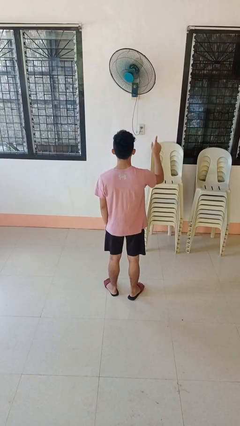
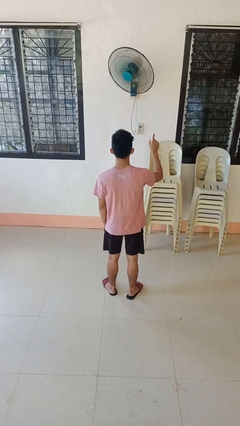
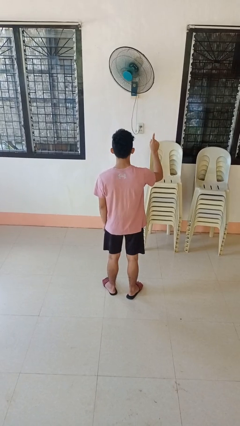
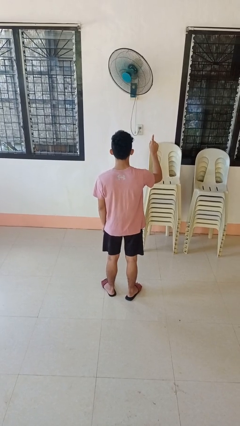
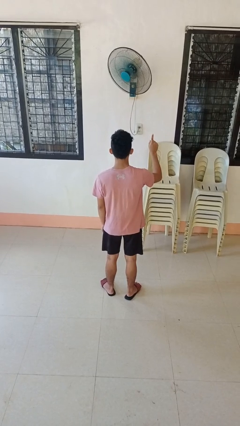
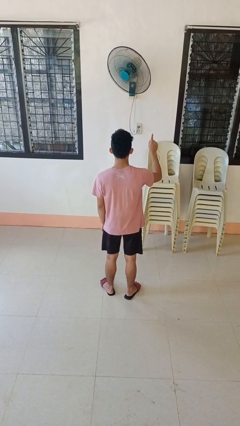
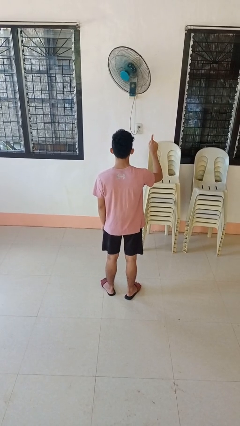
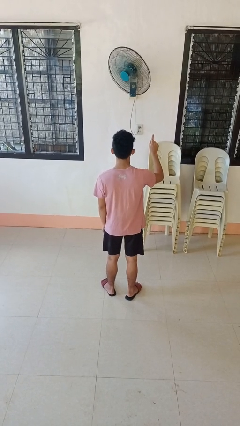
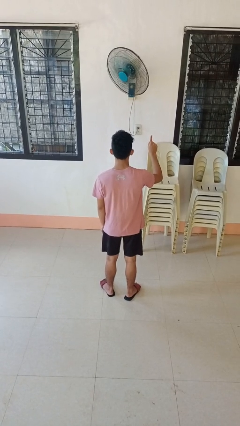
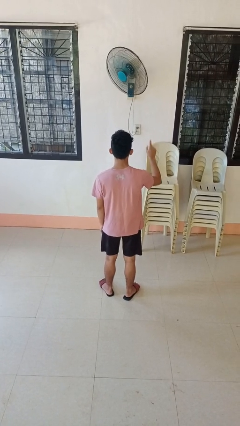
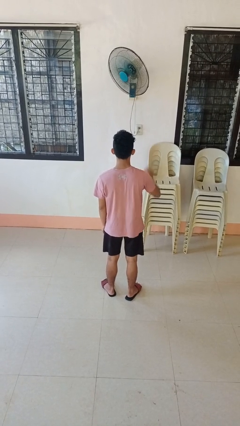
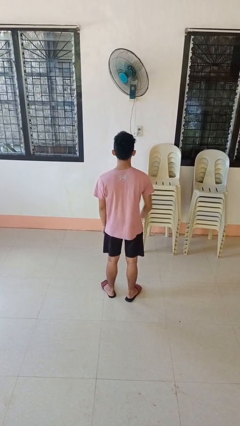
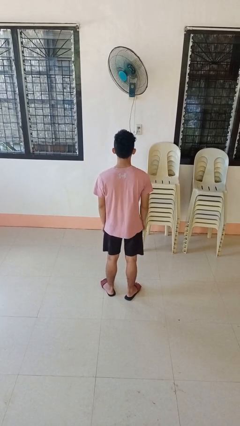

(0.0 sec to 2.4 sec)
person gestures number one

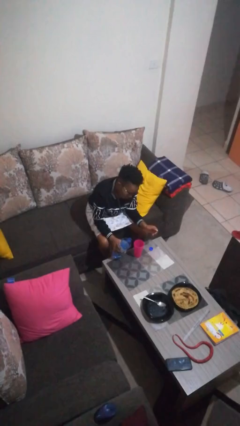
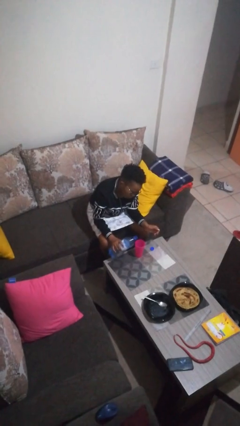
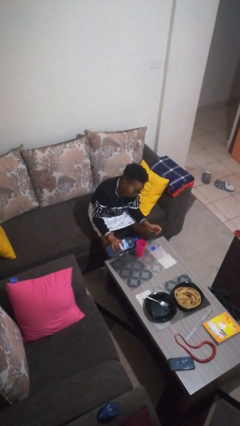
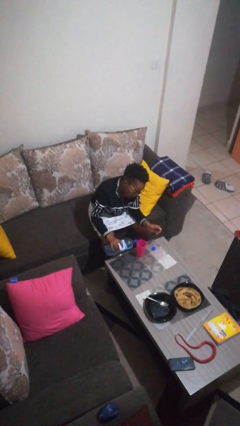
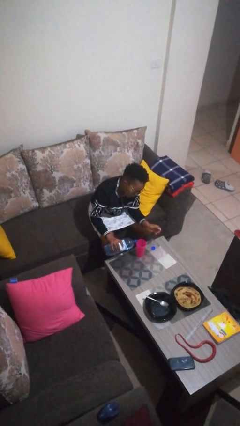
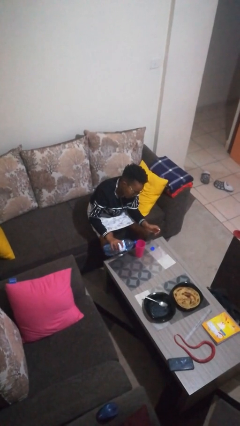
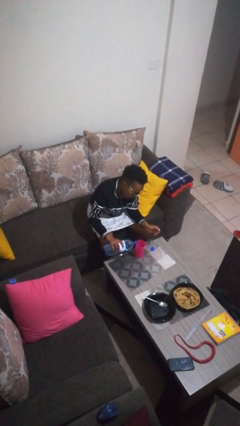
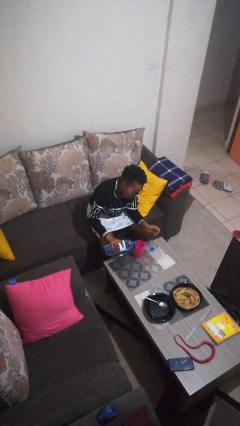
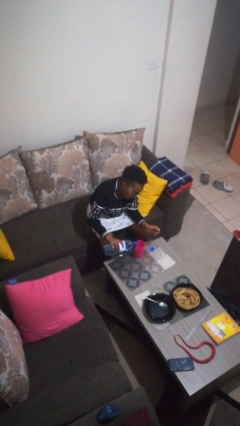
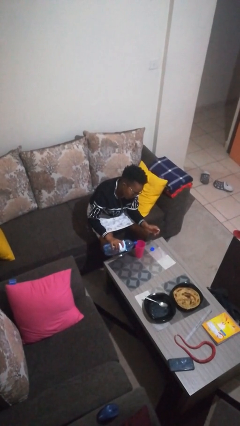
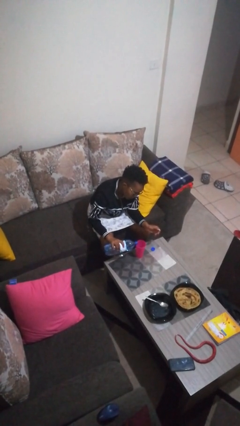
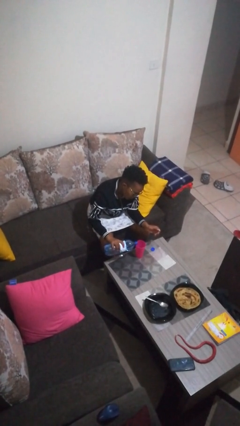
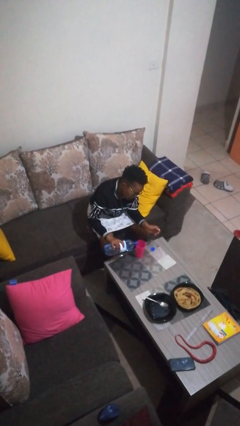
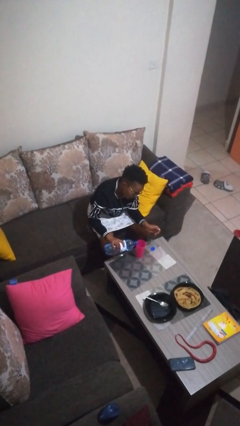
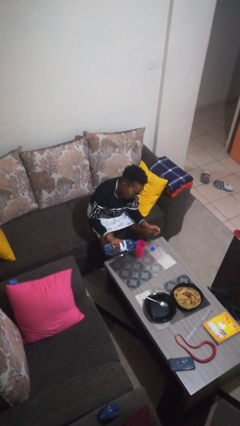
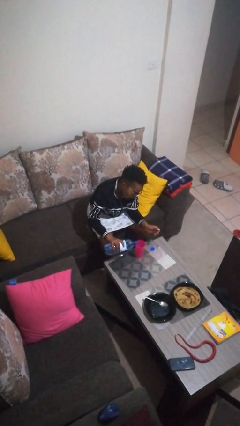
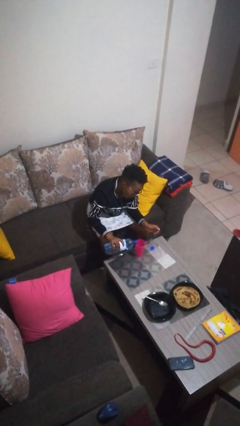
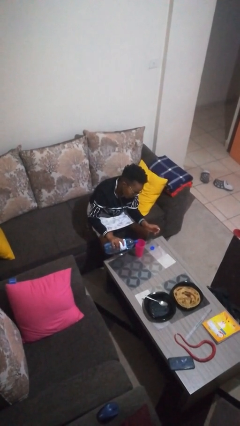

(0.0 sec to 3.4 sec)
person pours liquid into cup

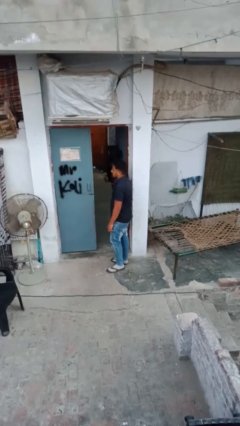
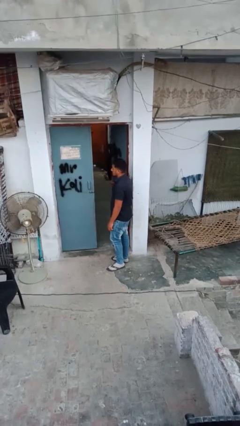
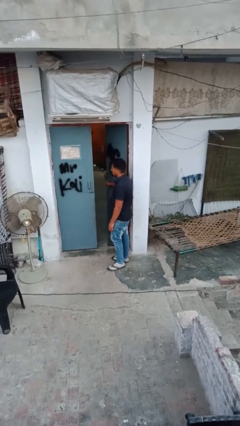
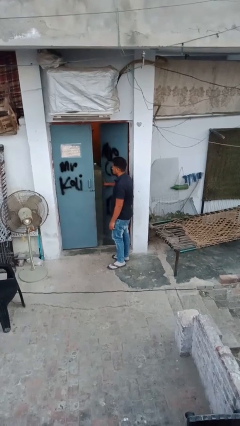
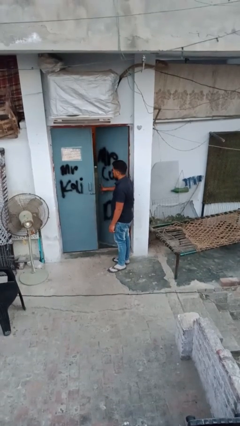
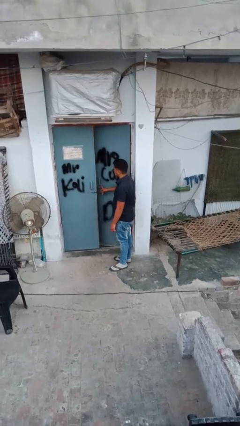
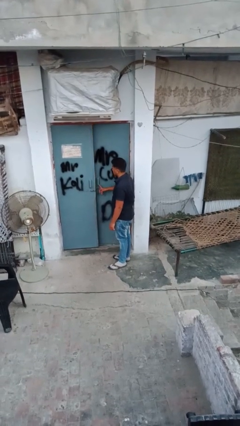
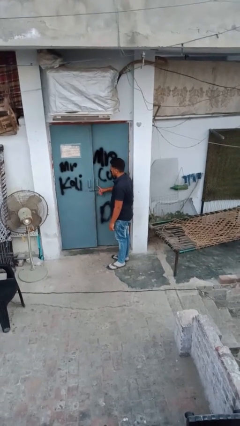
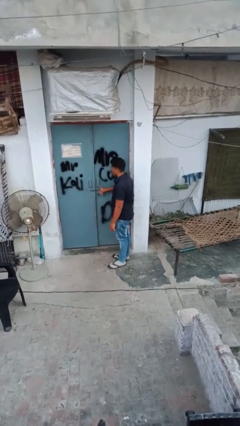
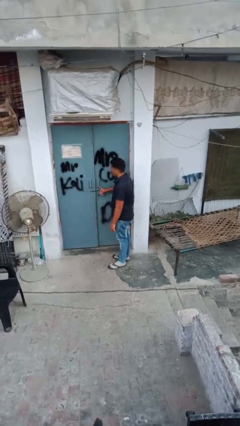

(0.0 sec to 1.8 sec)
person closes facility door

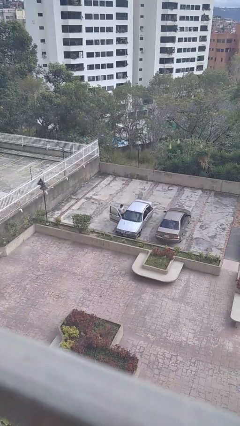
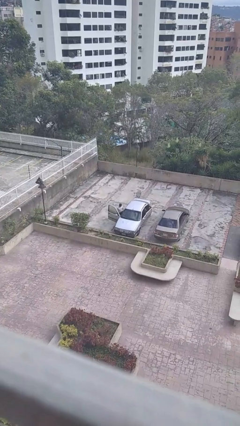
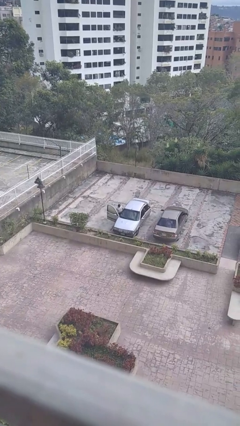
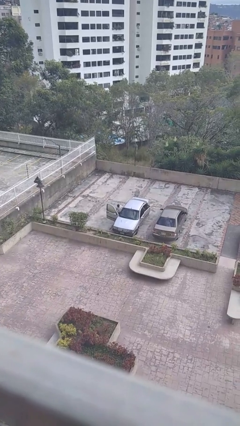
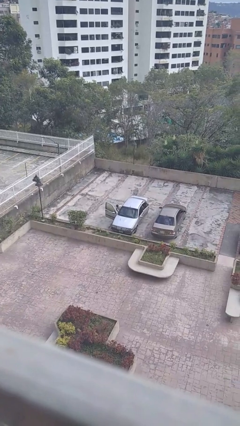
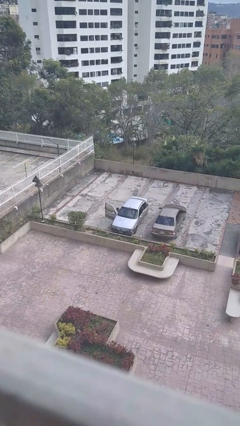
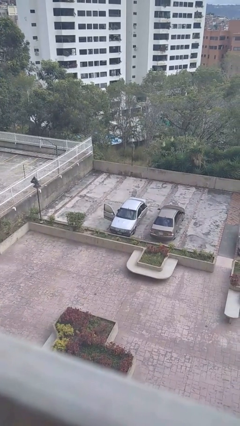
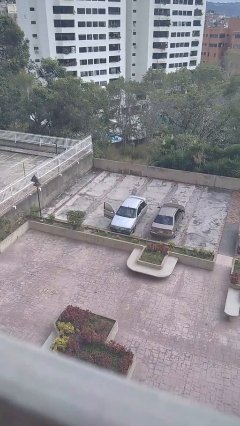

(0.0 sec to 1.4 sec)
person enters car

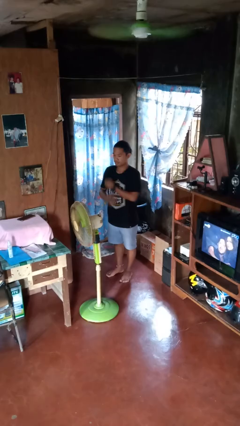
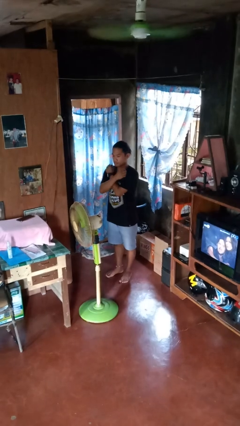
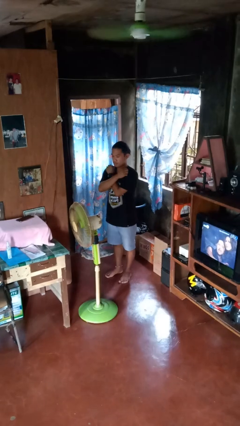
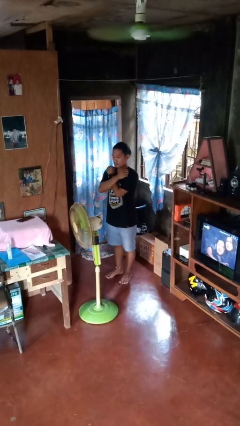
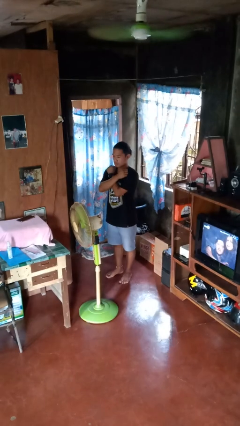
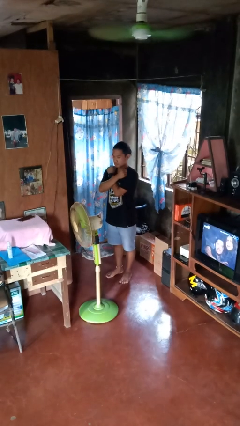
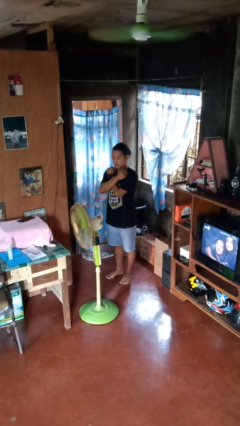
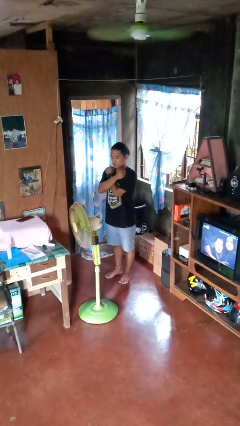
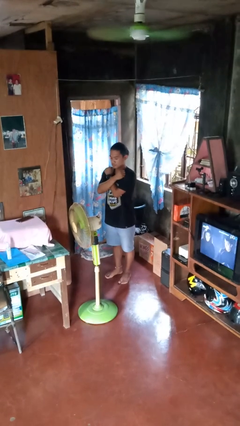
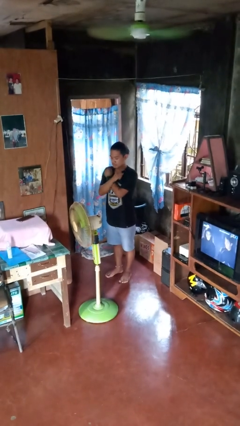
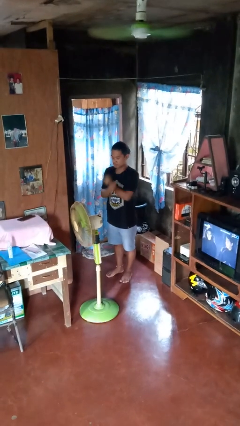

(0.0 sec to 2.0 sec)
person gestures arms x

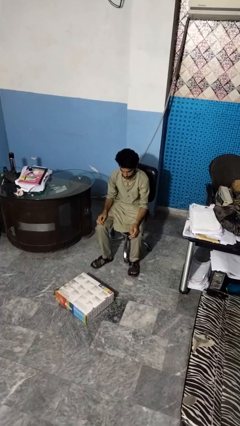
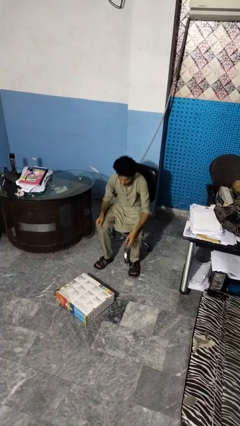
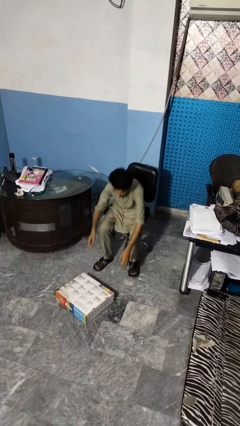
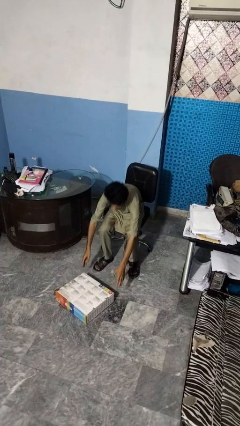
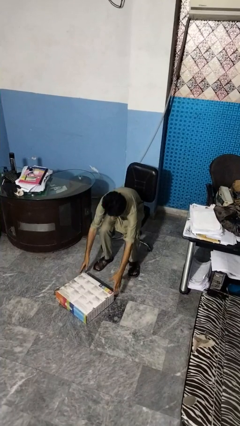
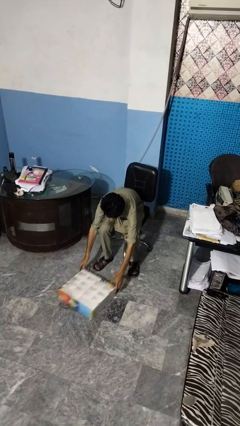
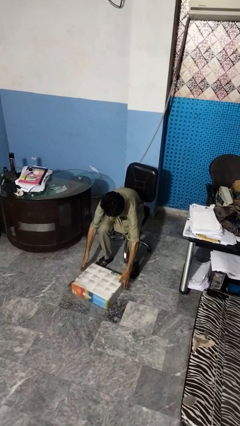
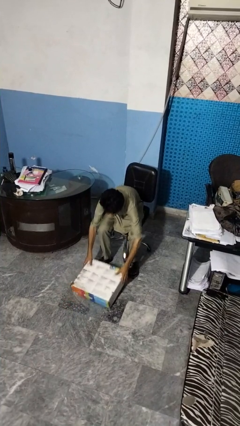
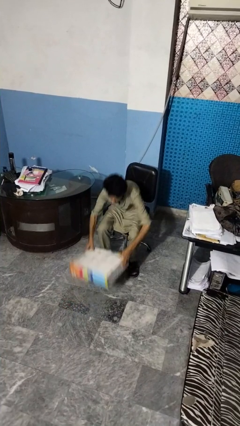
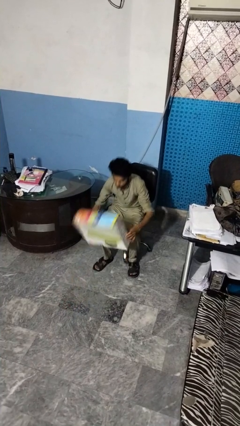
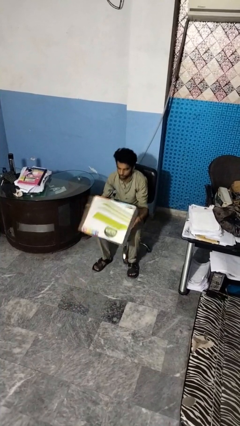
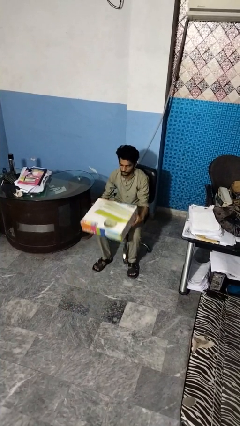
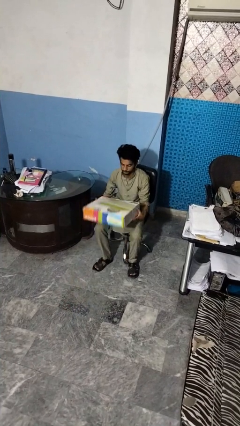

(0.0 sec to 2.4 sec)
person picks up object from floor

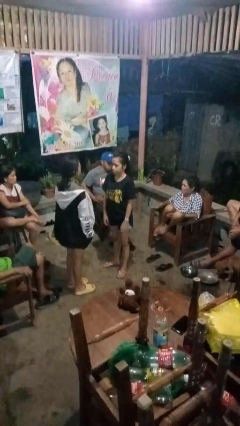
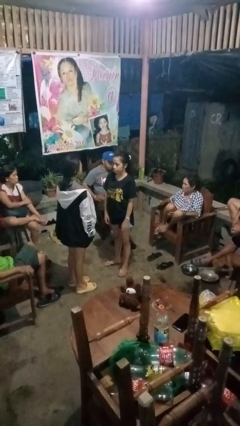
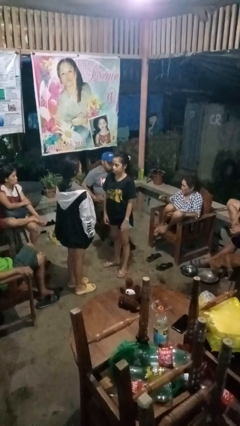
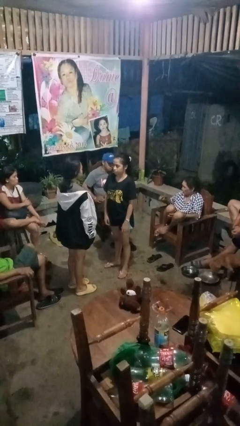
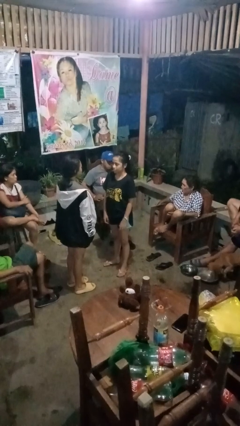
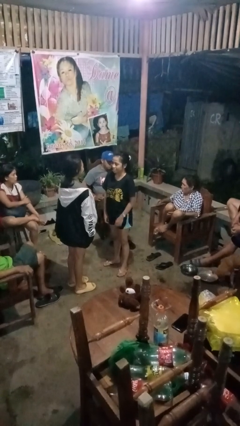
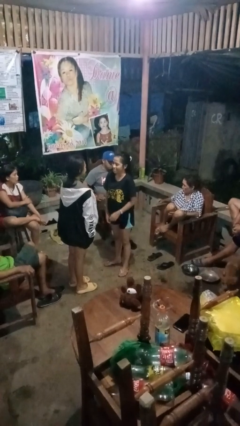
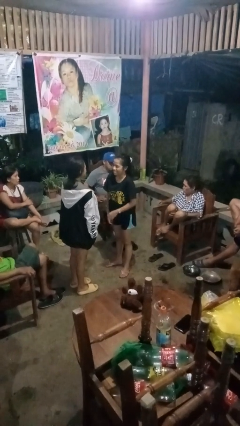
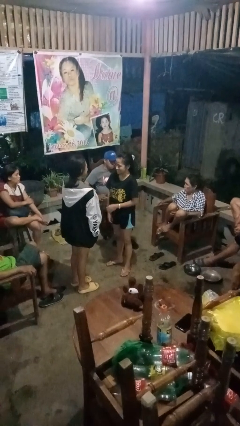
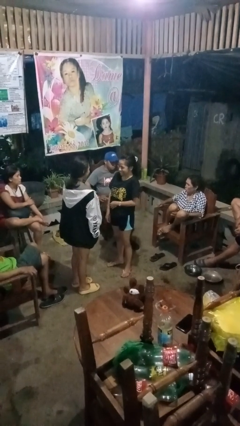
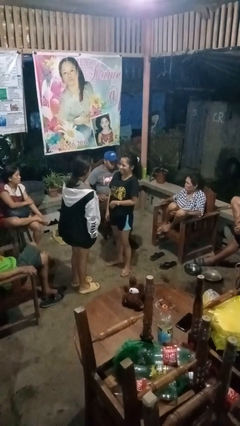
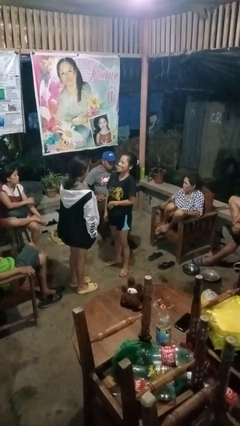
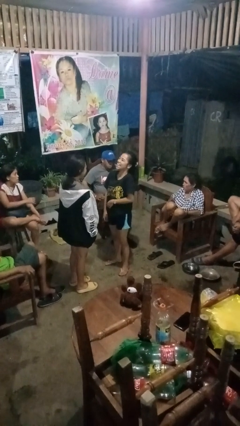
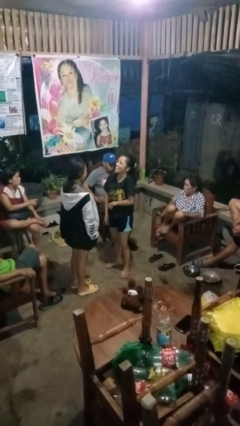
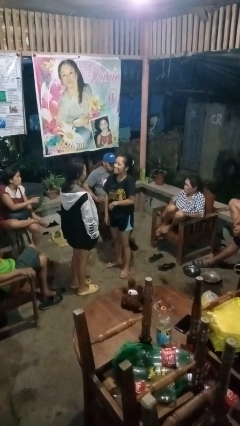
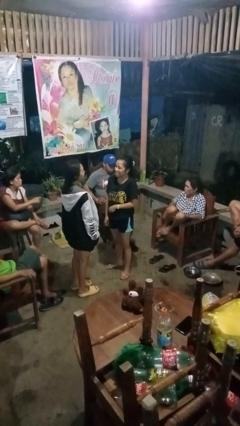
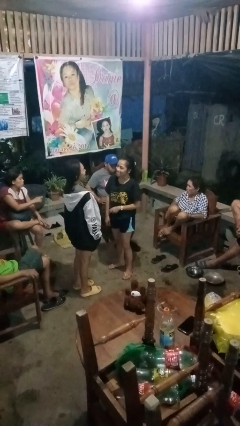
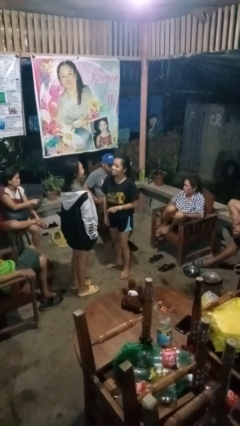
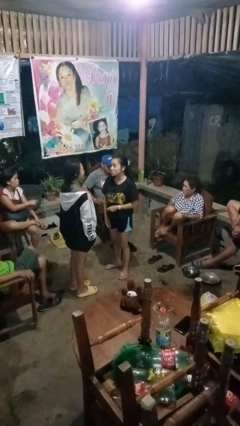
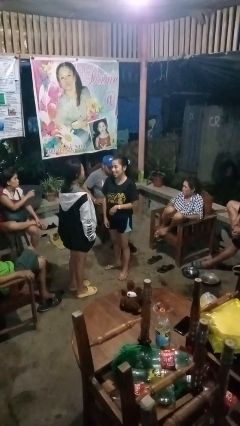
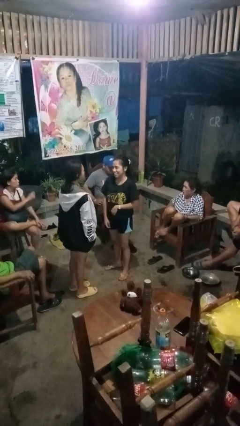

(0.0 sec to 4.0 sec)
person laughs with person
